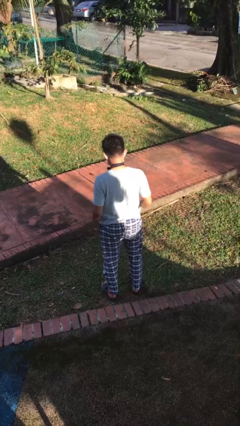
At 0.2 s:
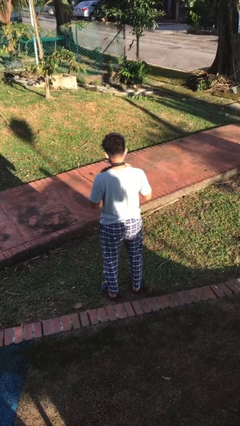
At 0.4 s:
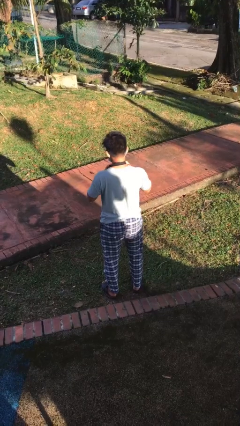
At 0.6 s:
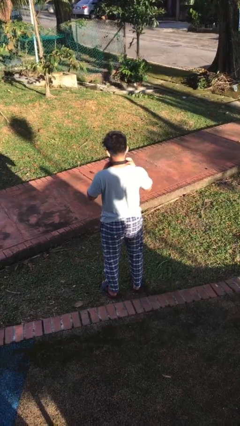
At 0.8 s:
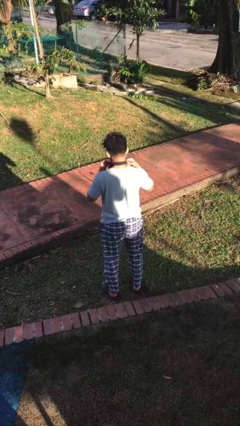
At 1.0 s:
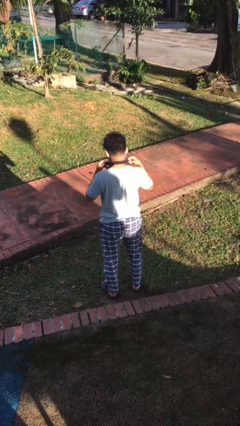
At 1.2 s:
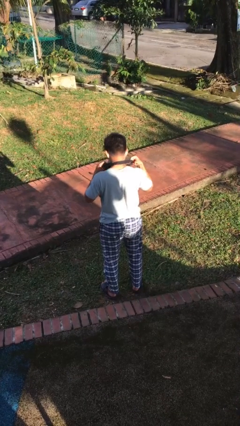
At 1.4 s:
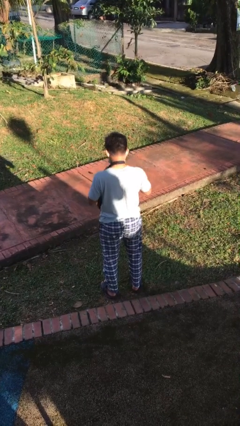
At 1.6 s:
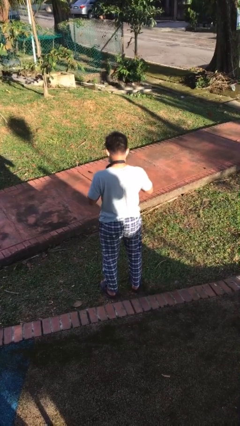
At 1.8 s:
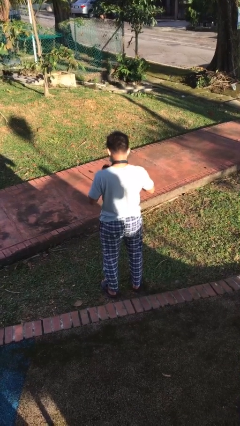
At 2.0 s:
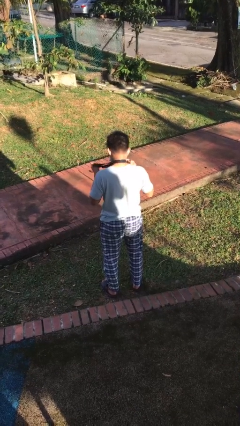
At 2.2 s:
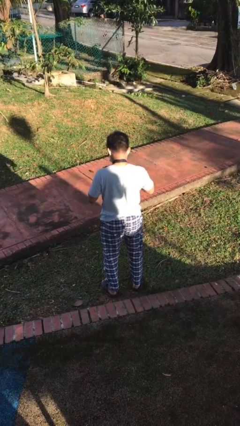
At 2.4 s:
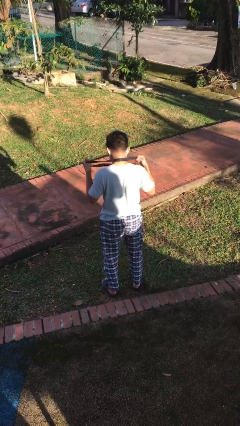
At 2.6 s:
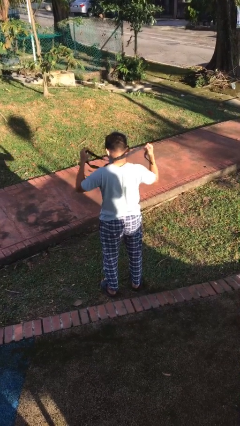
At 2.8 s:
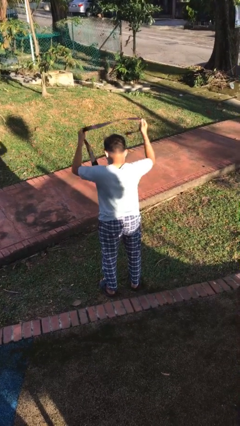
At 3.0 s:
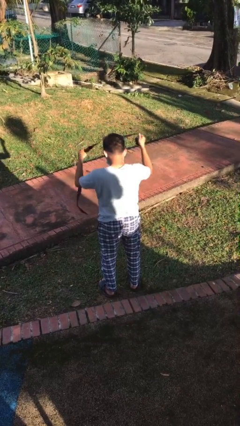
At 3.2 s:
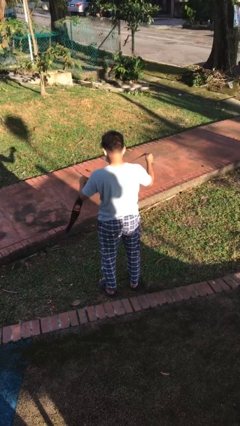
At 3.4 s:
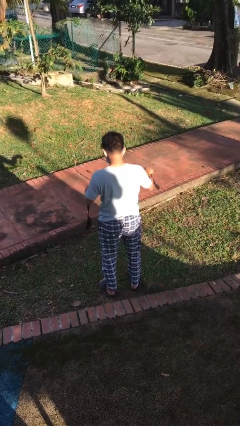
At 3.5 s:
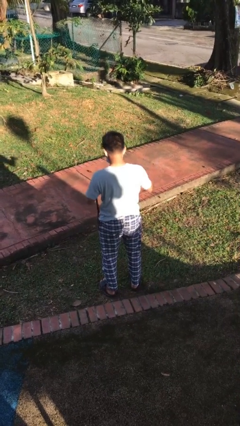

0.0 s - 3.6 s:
person takes off necktie

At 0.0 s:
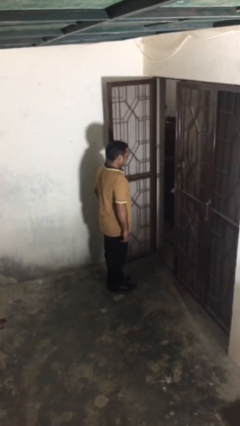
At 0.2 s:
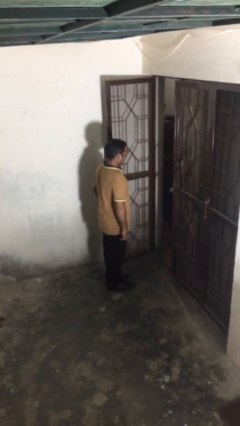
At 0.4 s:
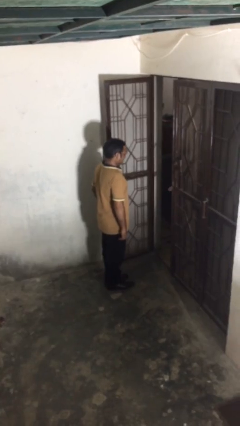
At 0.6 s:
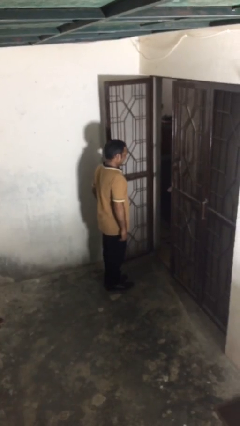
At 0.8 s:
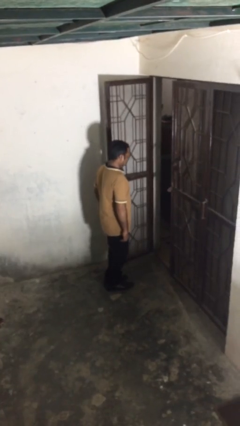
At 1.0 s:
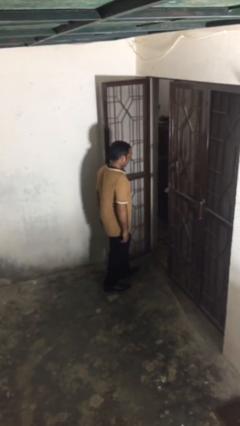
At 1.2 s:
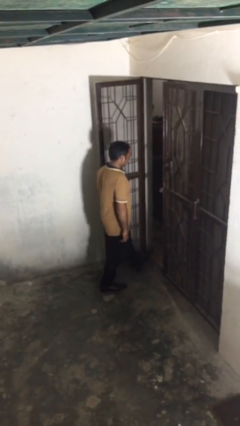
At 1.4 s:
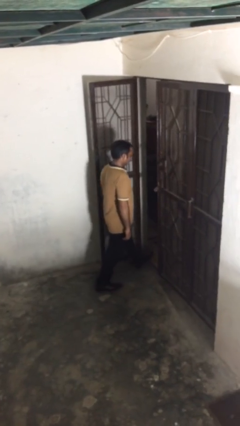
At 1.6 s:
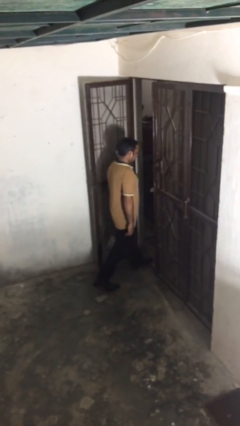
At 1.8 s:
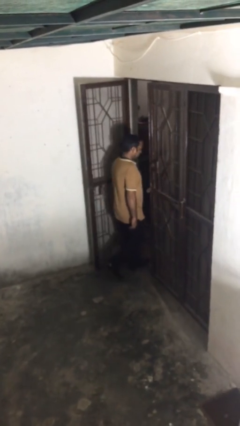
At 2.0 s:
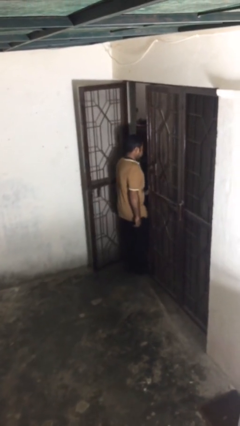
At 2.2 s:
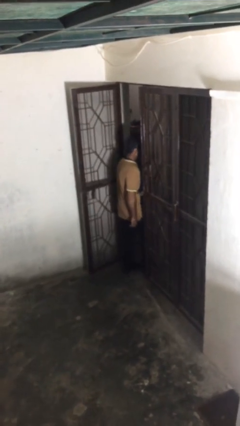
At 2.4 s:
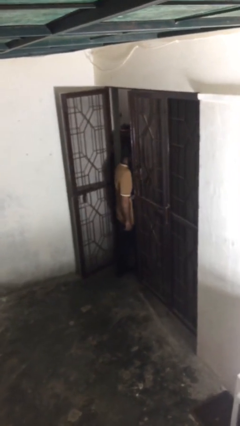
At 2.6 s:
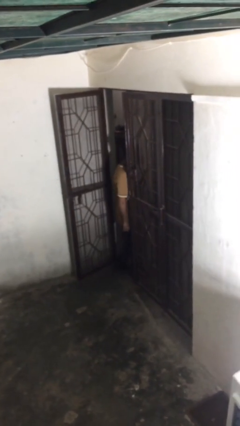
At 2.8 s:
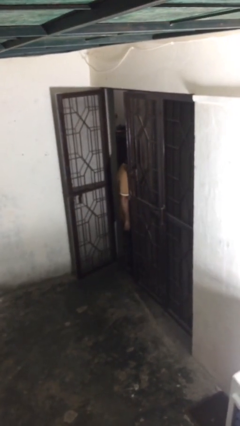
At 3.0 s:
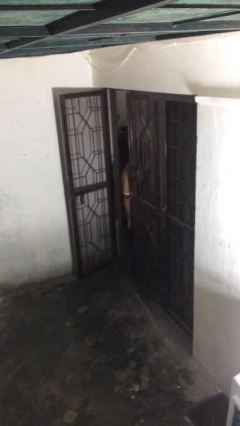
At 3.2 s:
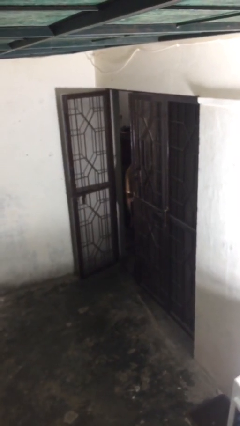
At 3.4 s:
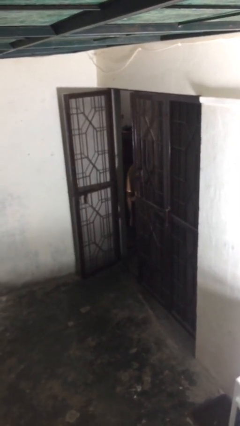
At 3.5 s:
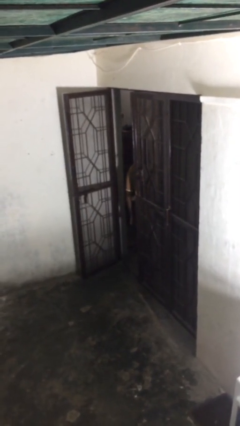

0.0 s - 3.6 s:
person exits scene through structure

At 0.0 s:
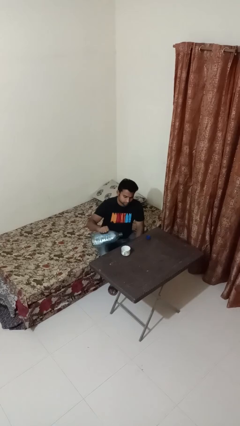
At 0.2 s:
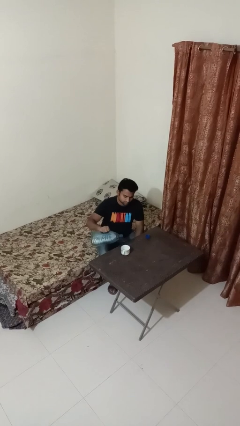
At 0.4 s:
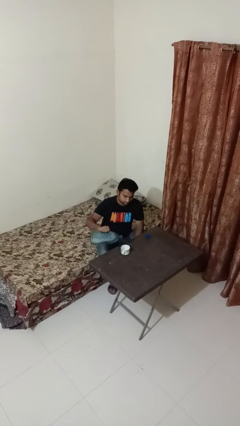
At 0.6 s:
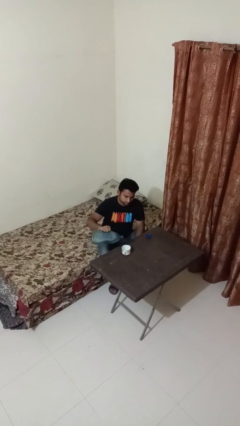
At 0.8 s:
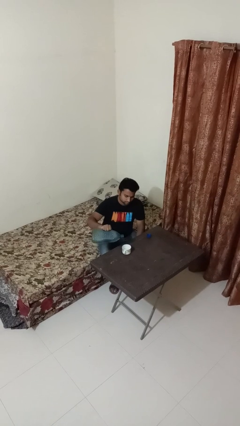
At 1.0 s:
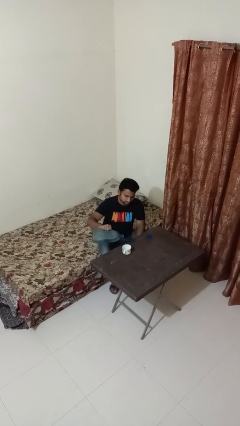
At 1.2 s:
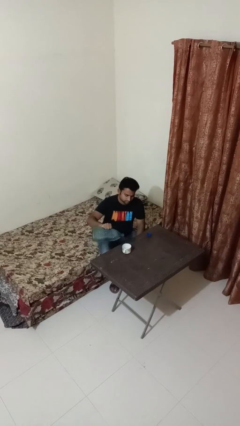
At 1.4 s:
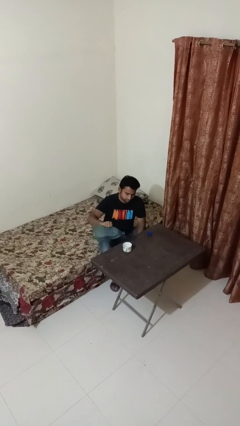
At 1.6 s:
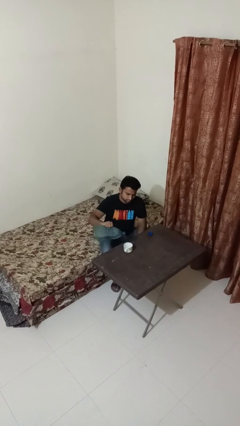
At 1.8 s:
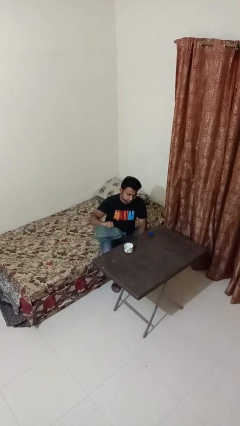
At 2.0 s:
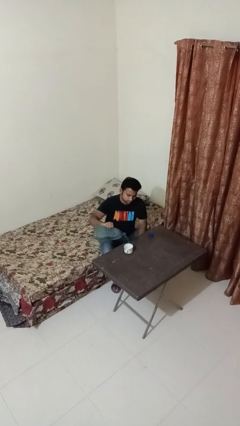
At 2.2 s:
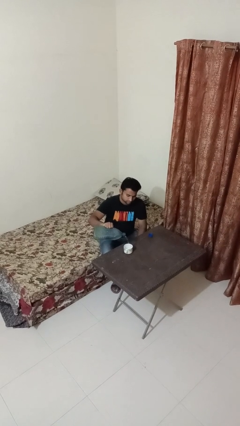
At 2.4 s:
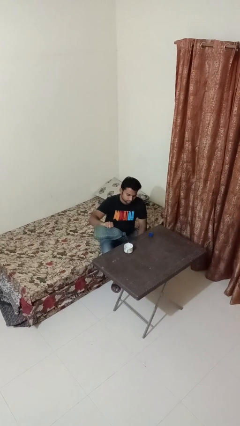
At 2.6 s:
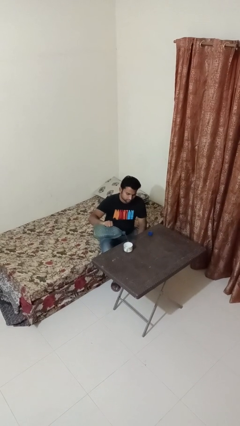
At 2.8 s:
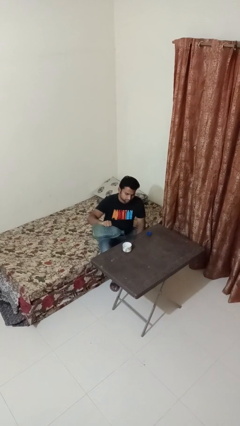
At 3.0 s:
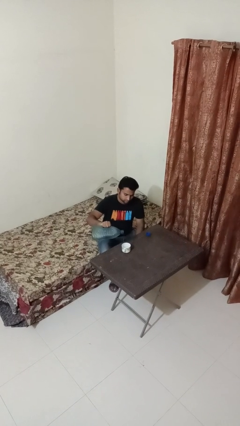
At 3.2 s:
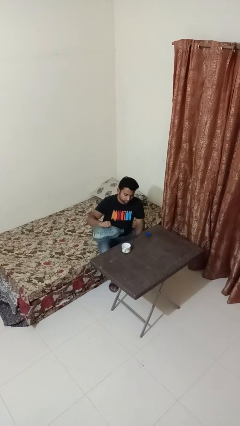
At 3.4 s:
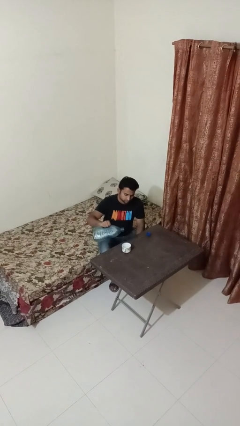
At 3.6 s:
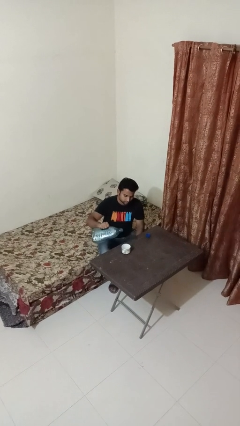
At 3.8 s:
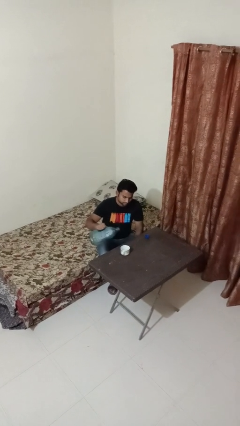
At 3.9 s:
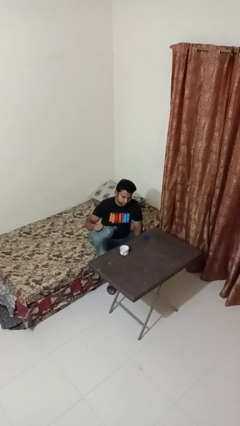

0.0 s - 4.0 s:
person pours liquid into cup

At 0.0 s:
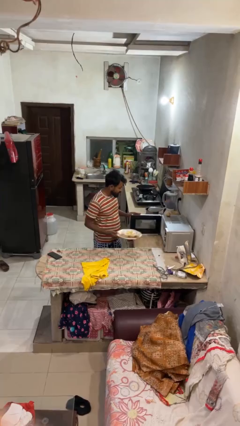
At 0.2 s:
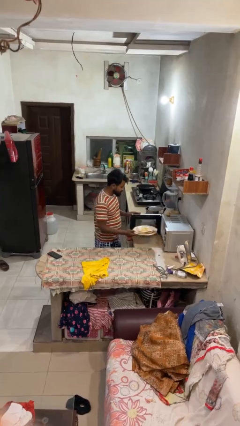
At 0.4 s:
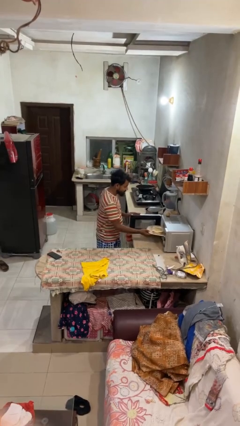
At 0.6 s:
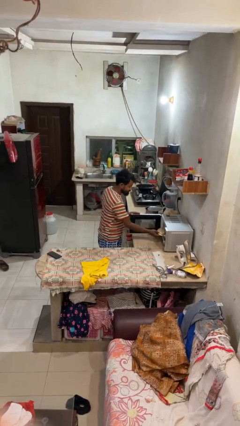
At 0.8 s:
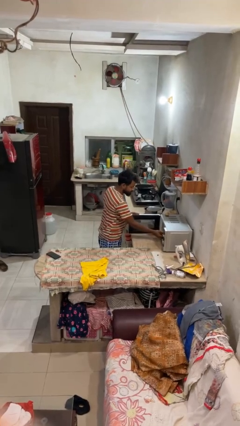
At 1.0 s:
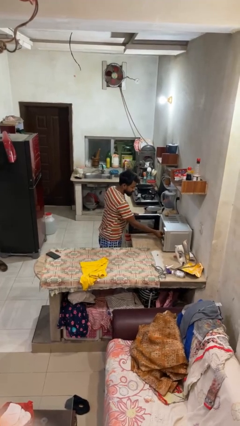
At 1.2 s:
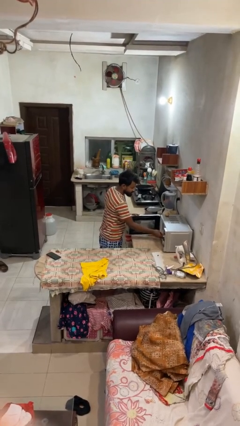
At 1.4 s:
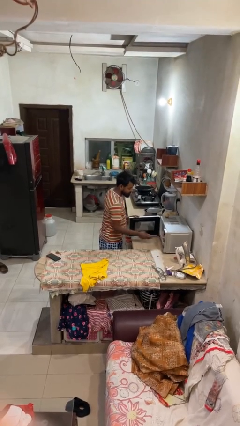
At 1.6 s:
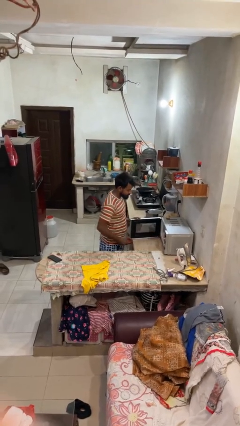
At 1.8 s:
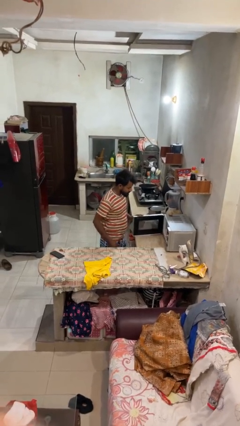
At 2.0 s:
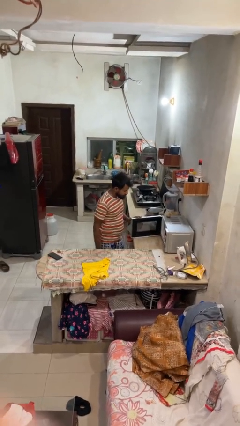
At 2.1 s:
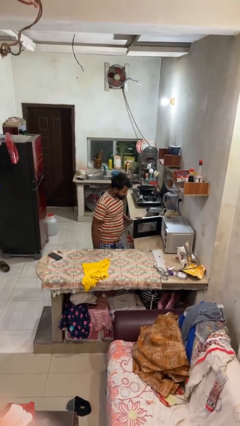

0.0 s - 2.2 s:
person puts object into microwave

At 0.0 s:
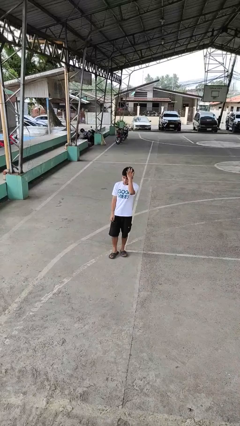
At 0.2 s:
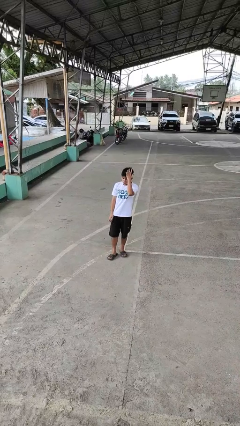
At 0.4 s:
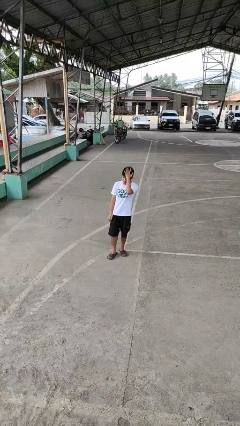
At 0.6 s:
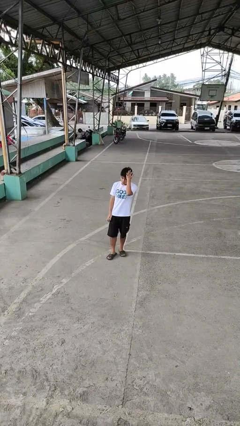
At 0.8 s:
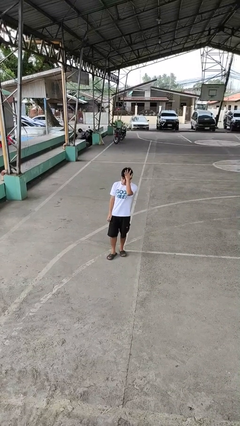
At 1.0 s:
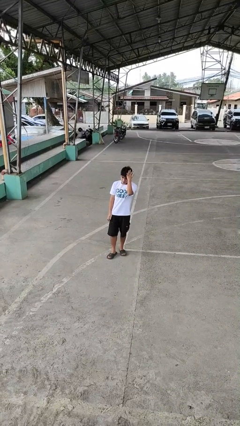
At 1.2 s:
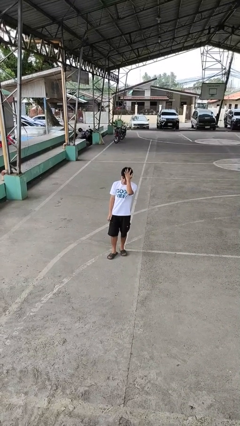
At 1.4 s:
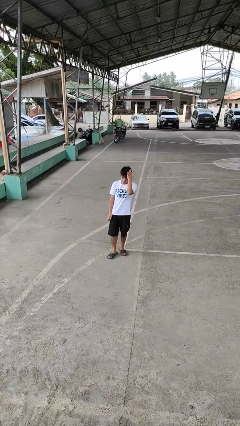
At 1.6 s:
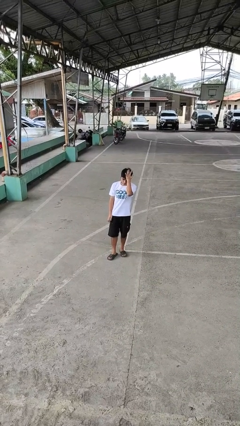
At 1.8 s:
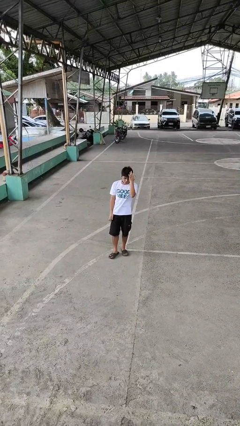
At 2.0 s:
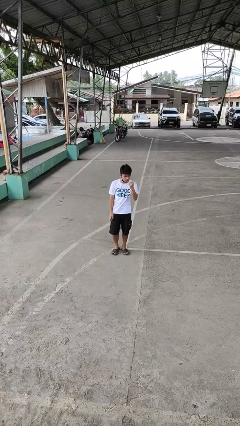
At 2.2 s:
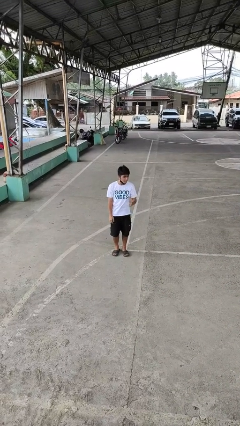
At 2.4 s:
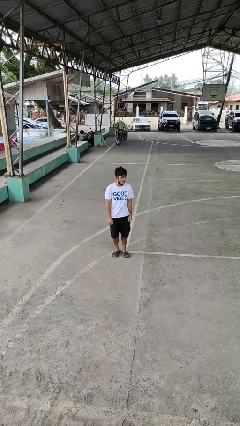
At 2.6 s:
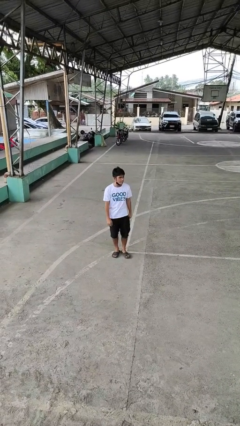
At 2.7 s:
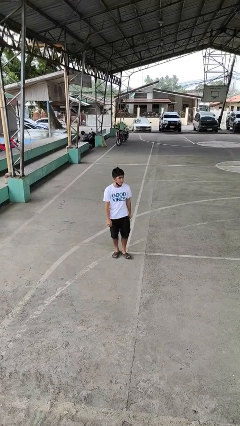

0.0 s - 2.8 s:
person pats head

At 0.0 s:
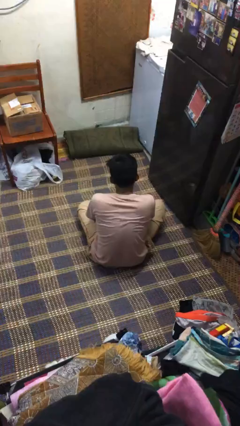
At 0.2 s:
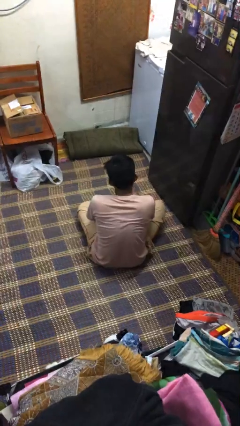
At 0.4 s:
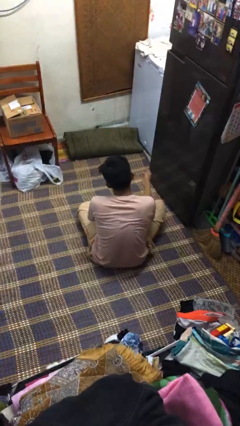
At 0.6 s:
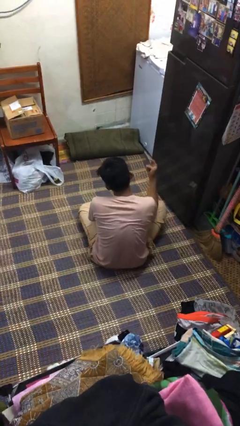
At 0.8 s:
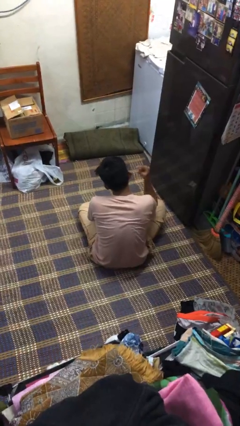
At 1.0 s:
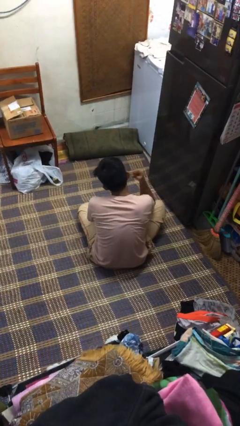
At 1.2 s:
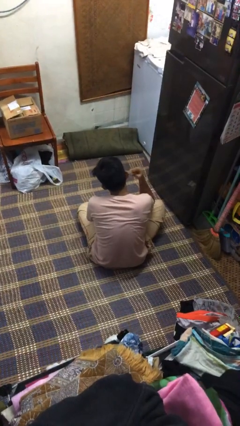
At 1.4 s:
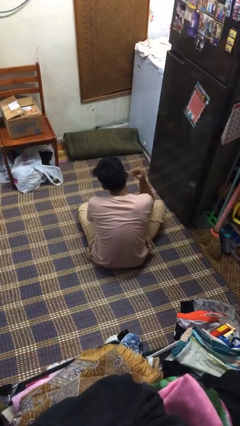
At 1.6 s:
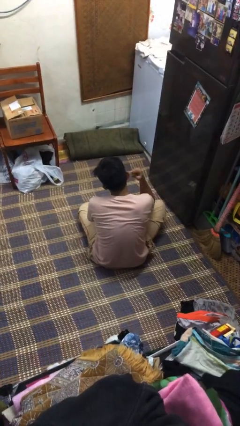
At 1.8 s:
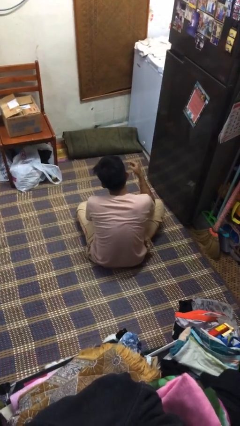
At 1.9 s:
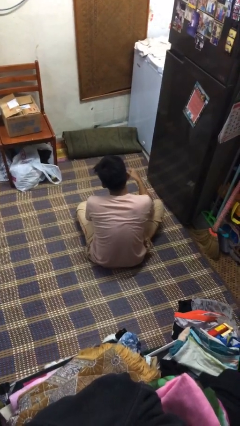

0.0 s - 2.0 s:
person gestures listen closely
